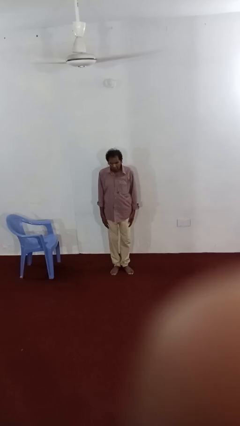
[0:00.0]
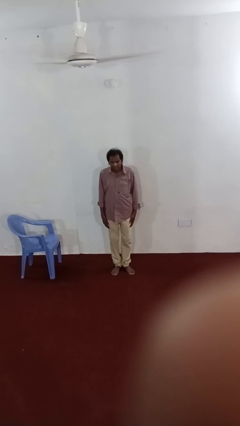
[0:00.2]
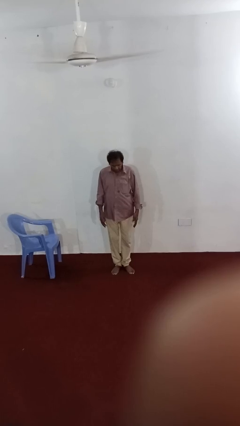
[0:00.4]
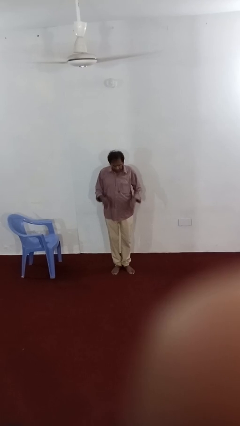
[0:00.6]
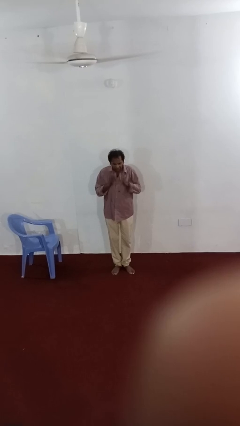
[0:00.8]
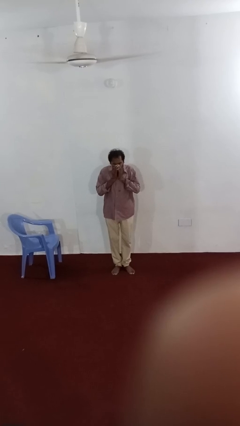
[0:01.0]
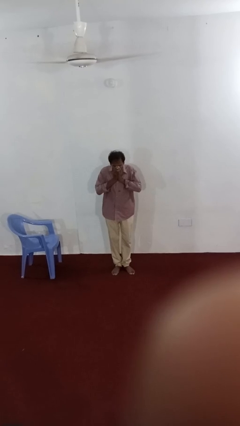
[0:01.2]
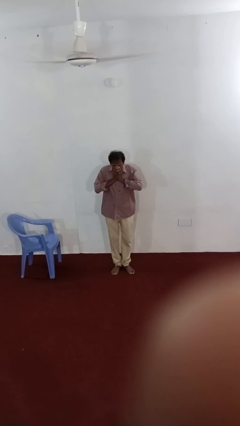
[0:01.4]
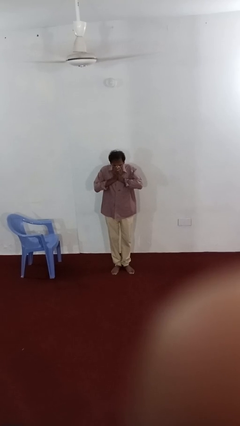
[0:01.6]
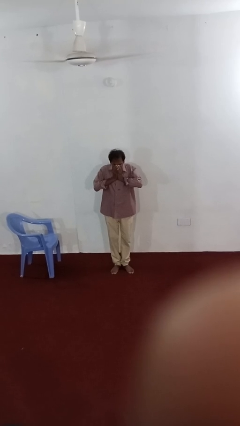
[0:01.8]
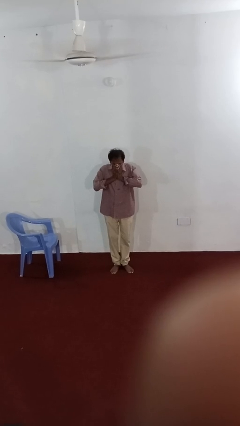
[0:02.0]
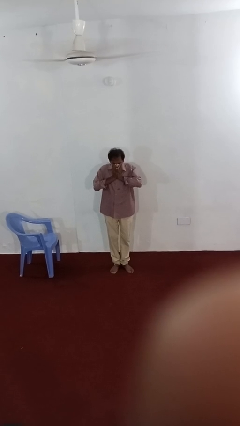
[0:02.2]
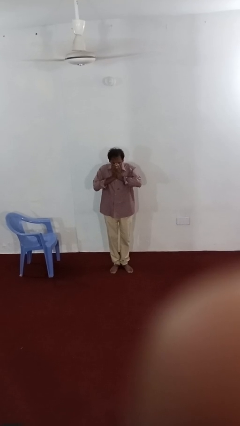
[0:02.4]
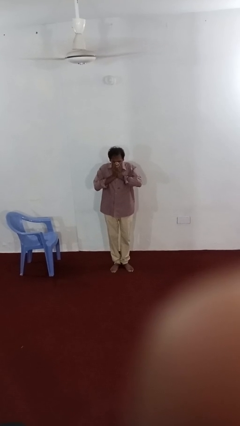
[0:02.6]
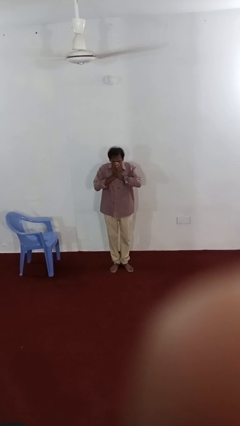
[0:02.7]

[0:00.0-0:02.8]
person sneezes into hand

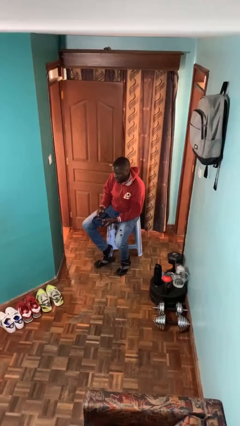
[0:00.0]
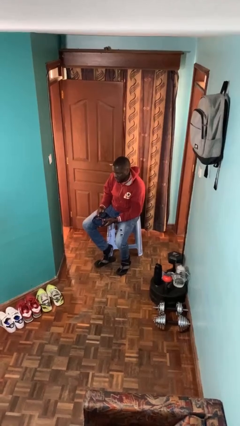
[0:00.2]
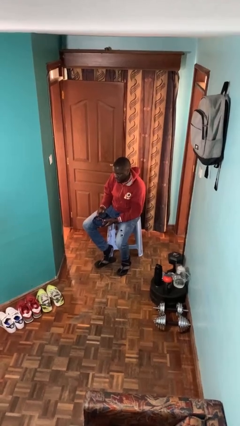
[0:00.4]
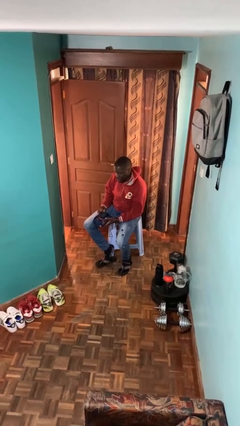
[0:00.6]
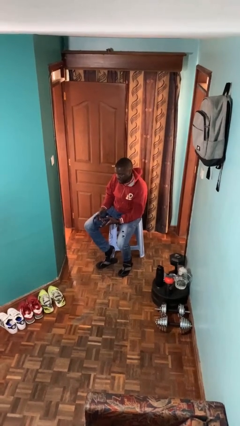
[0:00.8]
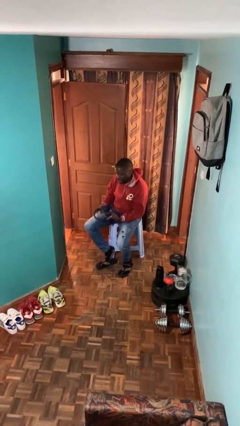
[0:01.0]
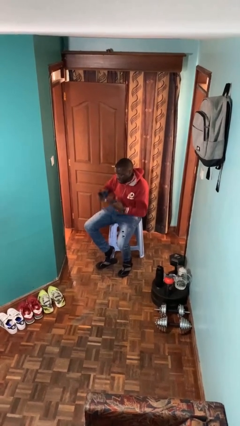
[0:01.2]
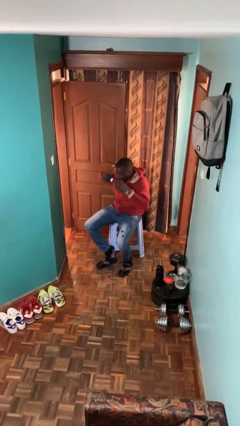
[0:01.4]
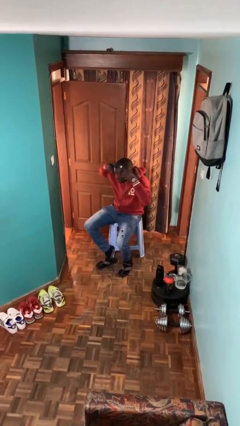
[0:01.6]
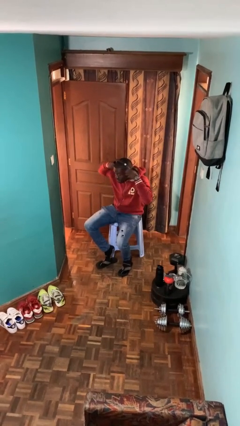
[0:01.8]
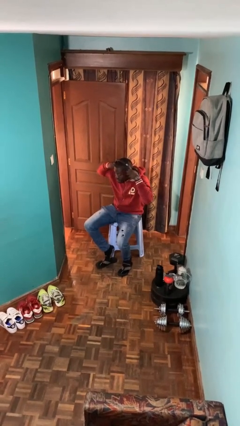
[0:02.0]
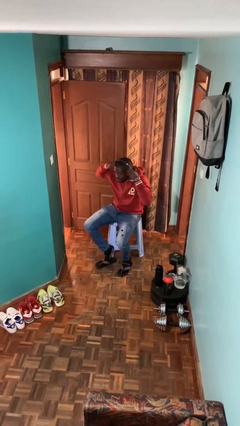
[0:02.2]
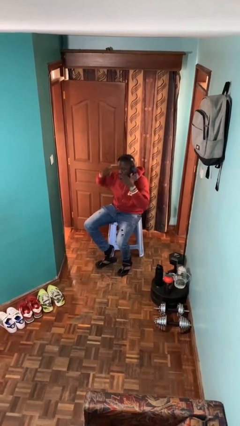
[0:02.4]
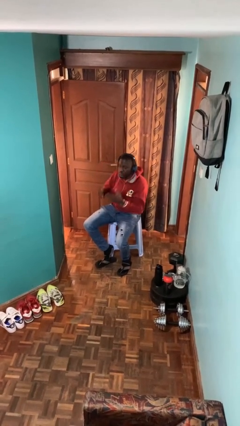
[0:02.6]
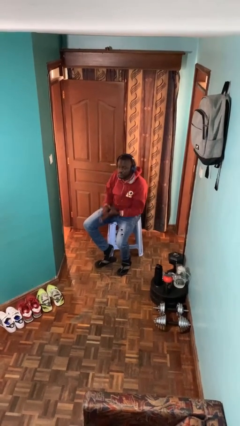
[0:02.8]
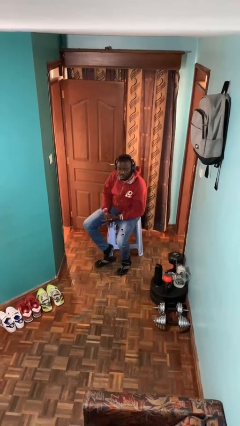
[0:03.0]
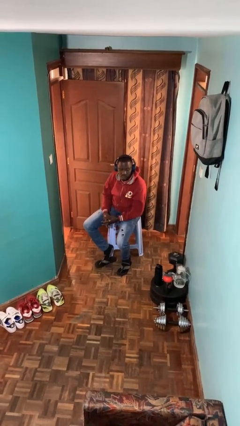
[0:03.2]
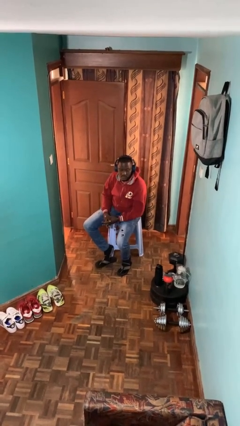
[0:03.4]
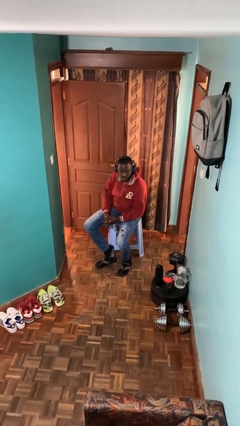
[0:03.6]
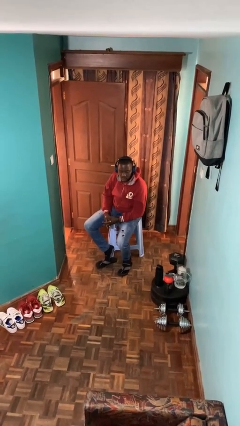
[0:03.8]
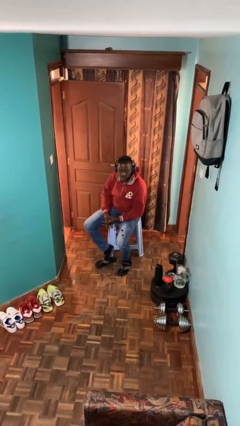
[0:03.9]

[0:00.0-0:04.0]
person puts on headphones

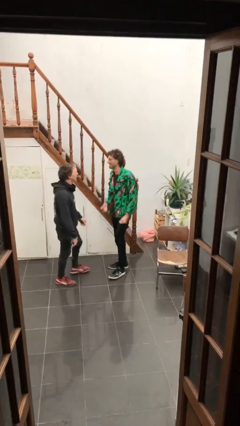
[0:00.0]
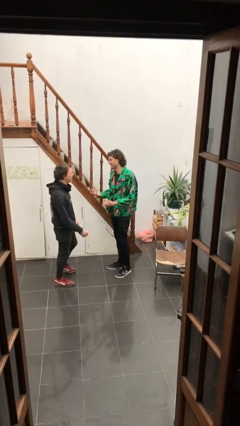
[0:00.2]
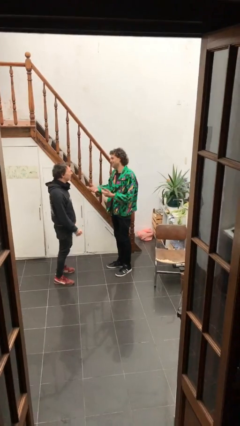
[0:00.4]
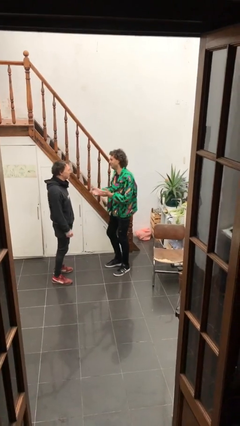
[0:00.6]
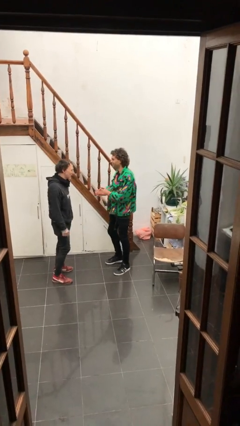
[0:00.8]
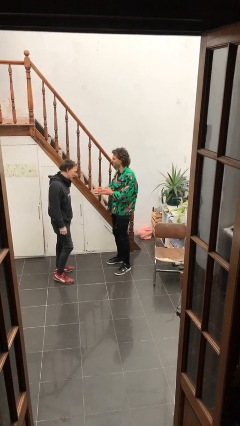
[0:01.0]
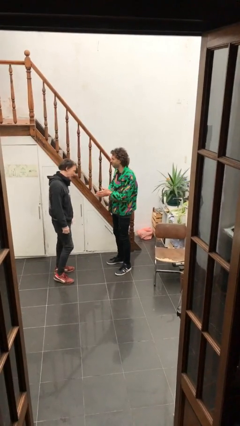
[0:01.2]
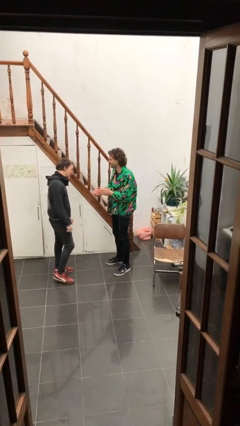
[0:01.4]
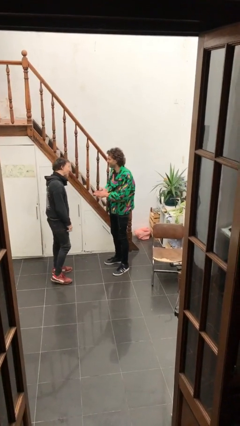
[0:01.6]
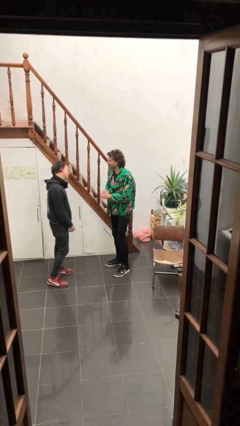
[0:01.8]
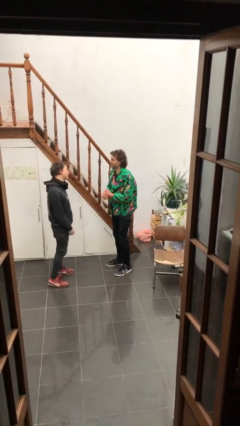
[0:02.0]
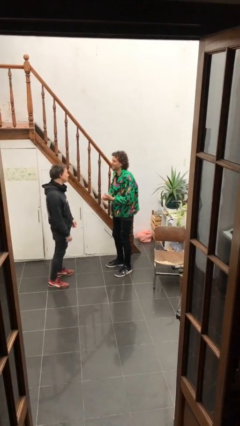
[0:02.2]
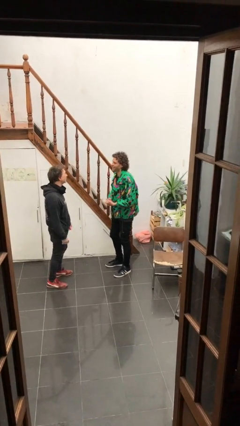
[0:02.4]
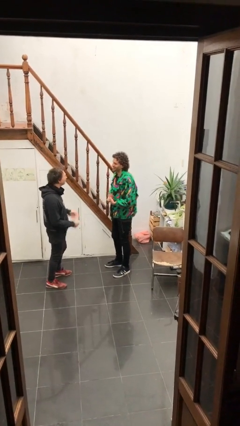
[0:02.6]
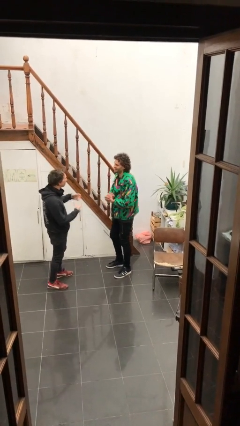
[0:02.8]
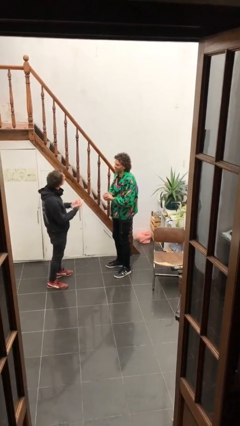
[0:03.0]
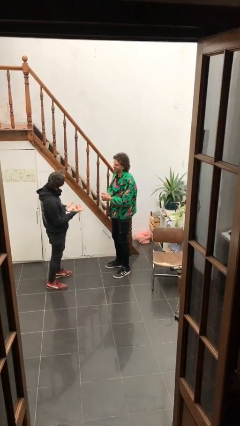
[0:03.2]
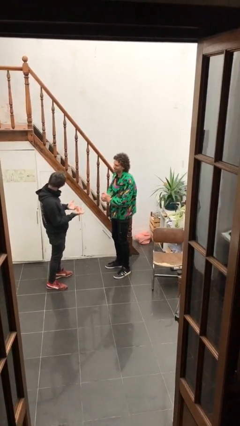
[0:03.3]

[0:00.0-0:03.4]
person talks to person

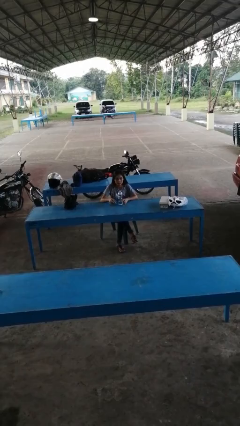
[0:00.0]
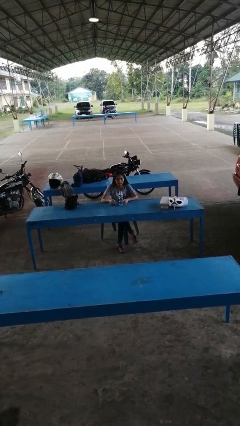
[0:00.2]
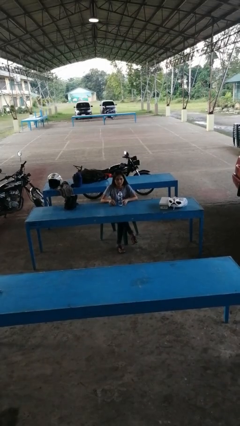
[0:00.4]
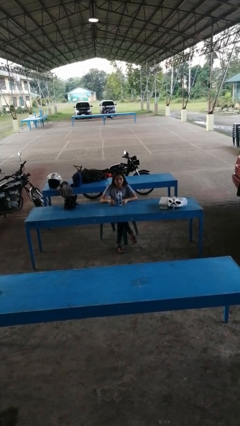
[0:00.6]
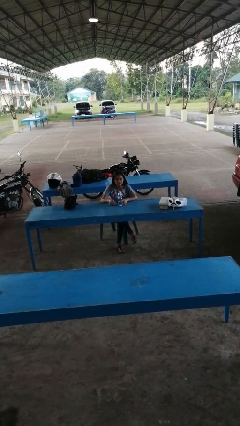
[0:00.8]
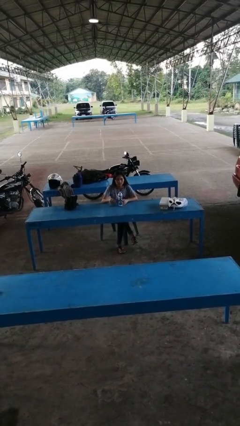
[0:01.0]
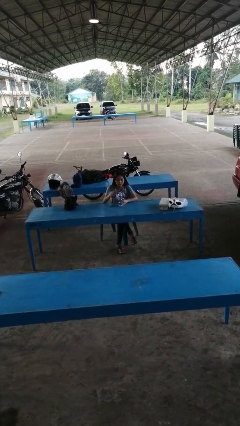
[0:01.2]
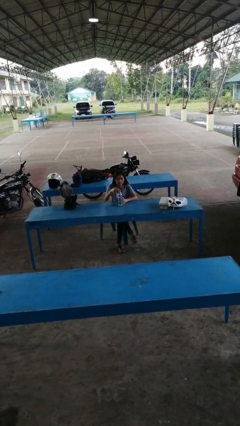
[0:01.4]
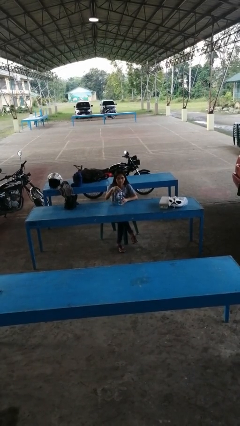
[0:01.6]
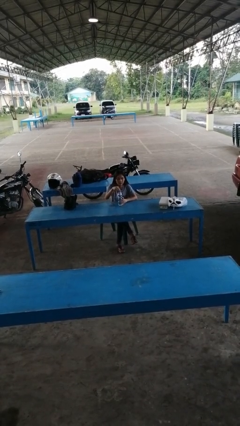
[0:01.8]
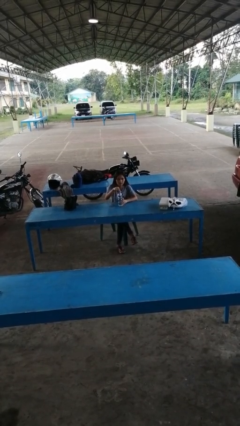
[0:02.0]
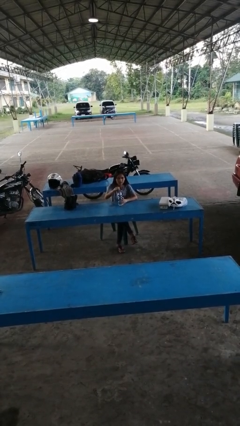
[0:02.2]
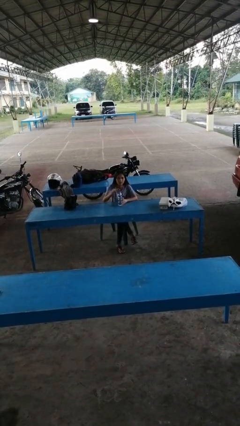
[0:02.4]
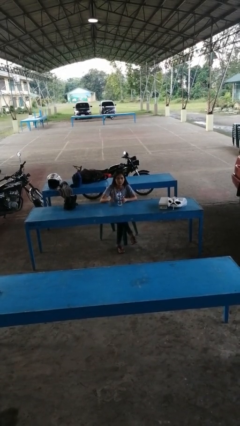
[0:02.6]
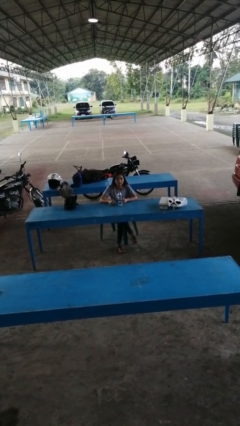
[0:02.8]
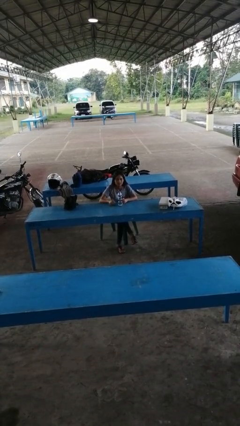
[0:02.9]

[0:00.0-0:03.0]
person screws lid to bottle

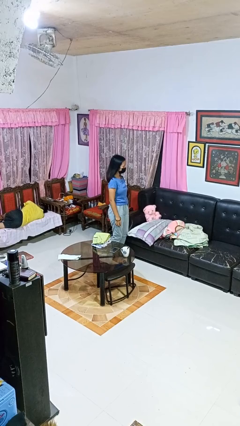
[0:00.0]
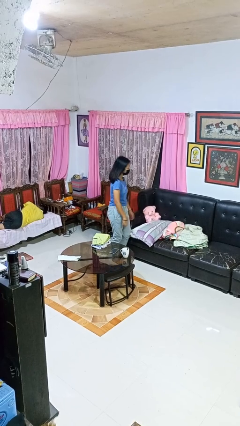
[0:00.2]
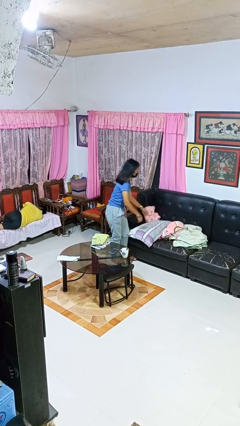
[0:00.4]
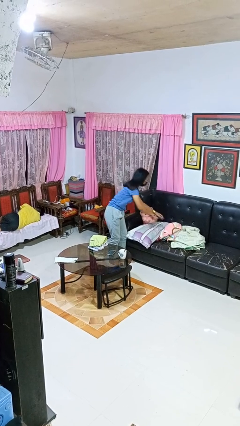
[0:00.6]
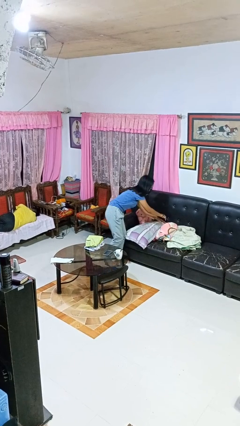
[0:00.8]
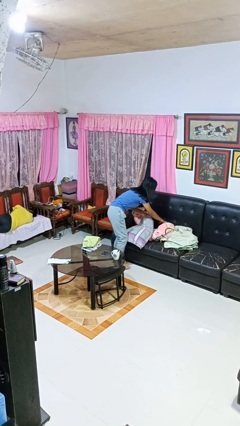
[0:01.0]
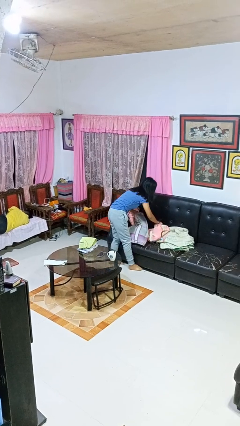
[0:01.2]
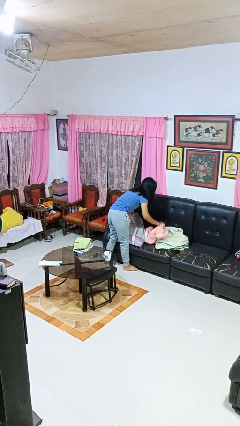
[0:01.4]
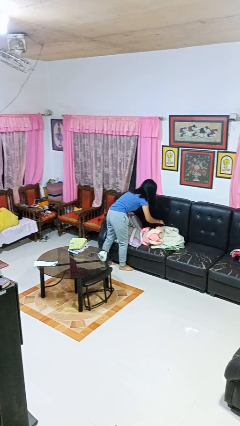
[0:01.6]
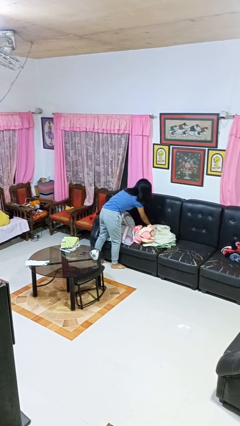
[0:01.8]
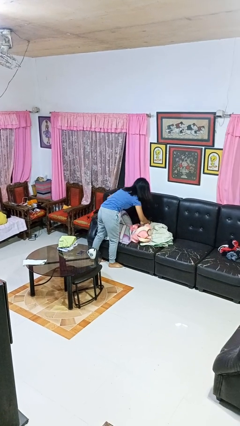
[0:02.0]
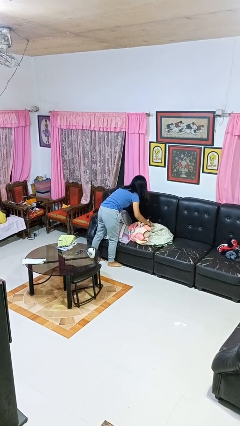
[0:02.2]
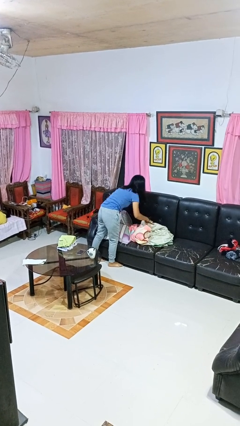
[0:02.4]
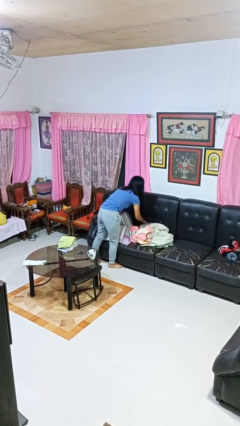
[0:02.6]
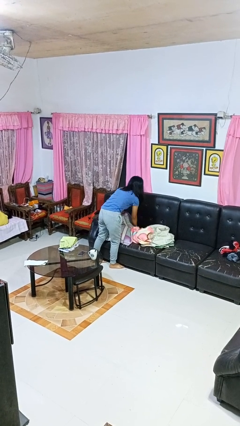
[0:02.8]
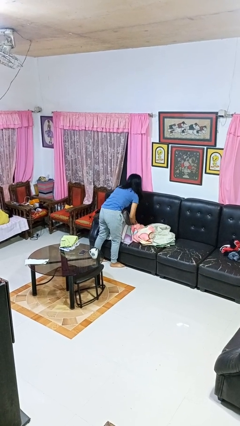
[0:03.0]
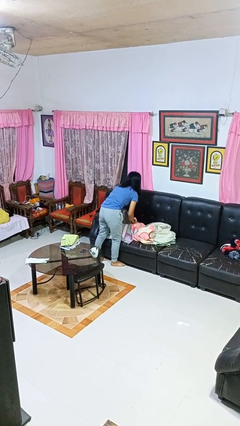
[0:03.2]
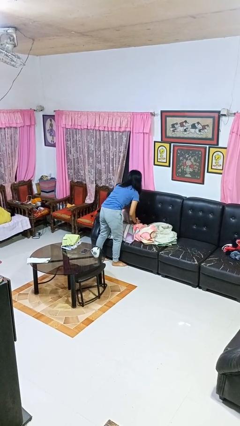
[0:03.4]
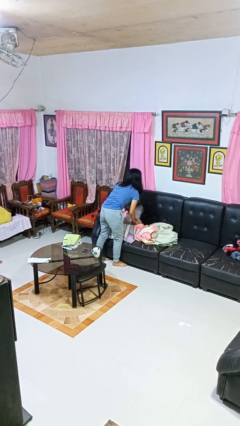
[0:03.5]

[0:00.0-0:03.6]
person searches in couch

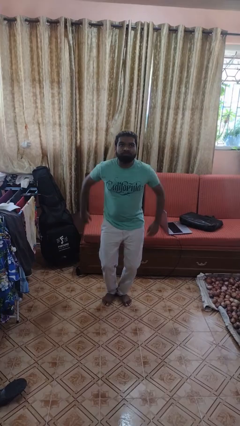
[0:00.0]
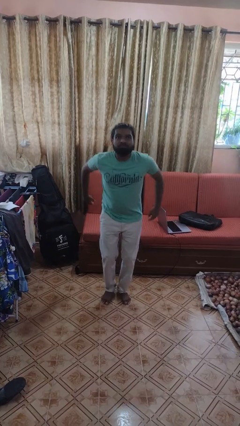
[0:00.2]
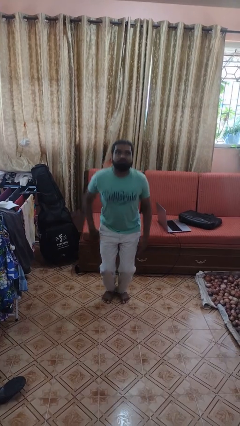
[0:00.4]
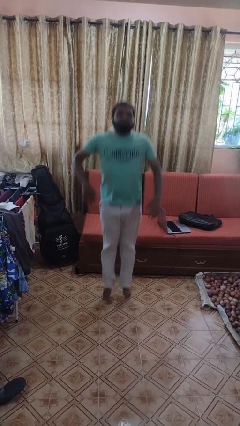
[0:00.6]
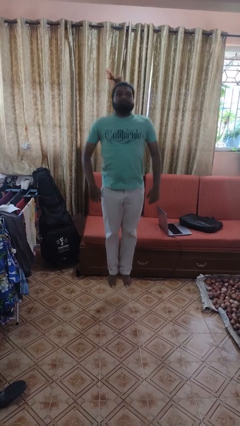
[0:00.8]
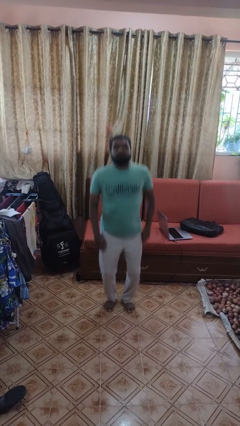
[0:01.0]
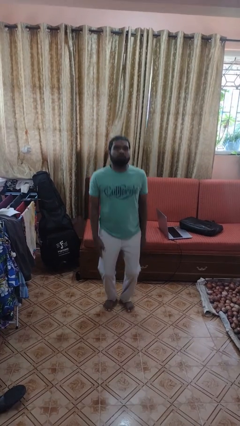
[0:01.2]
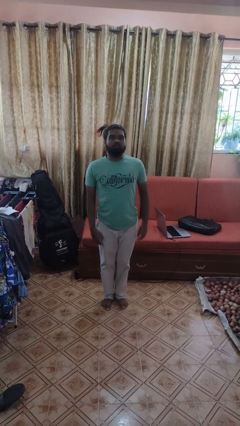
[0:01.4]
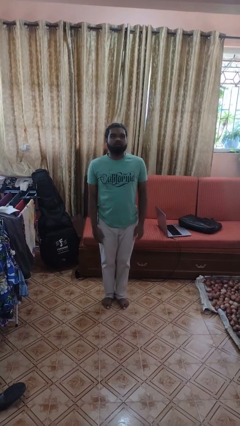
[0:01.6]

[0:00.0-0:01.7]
person jumps
